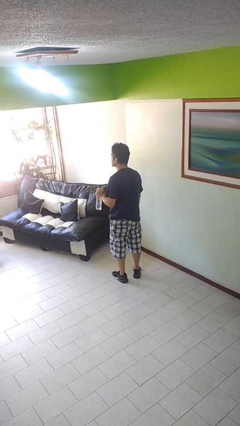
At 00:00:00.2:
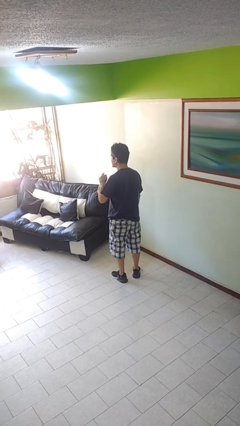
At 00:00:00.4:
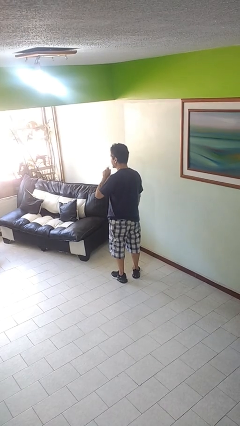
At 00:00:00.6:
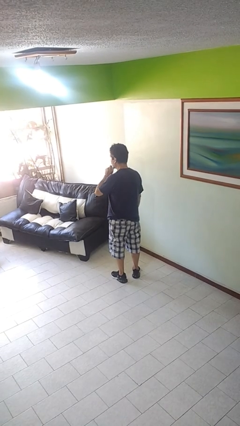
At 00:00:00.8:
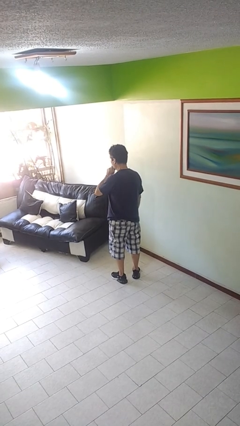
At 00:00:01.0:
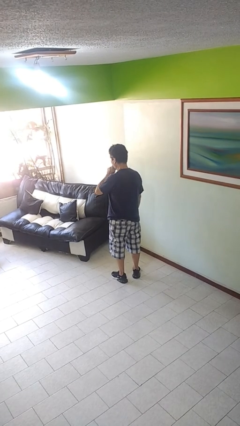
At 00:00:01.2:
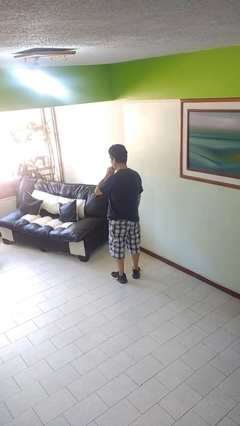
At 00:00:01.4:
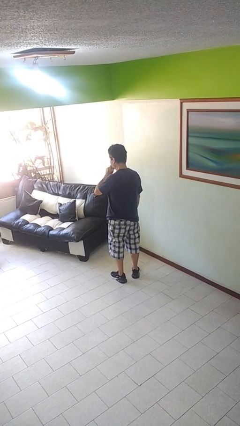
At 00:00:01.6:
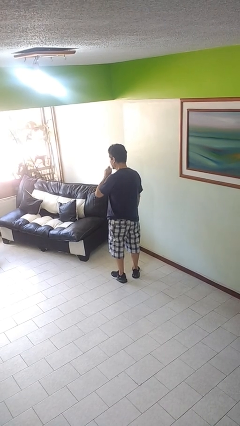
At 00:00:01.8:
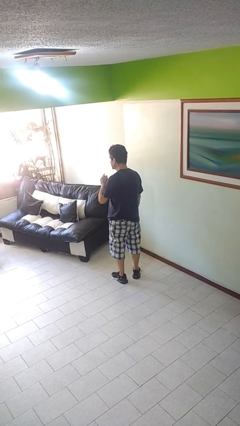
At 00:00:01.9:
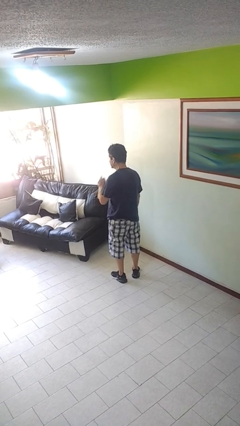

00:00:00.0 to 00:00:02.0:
person drinks from straw

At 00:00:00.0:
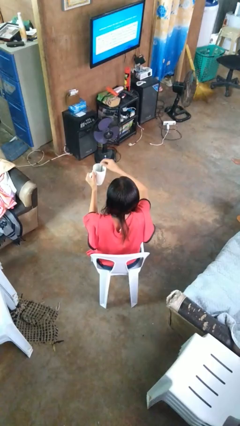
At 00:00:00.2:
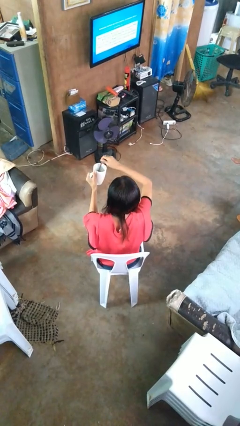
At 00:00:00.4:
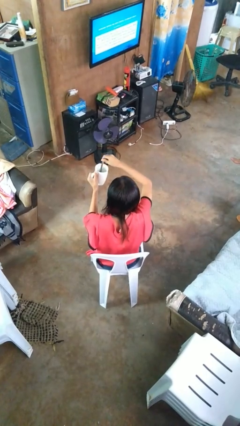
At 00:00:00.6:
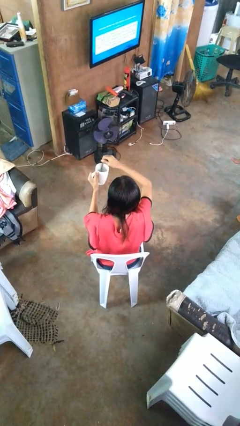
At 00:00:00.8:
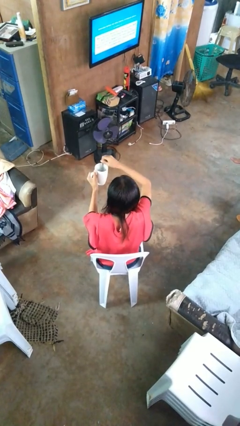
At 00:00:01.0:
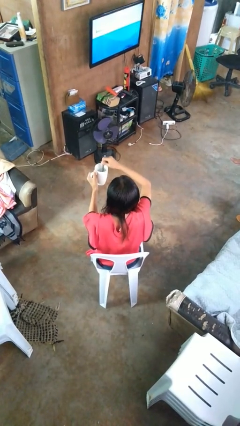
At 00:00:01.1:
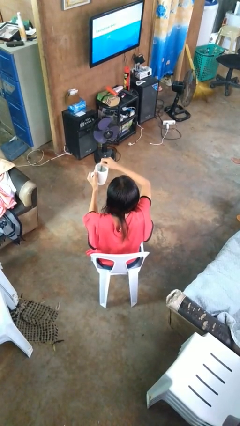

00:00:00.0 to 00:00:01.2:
person stirs mug

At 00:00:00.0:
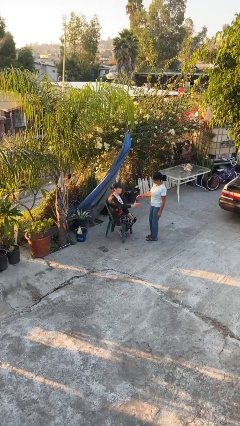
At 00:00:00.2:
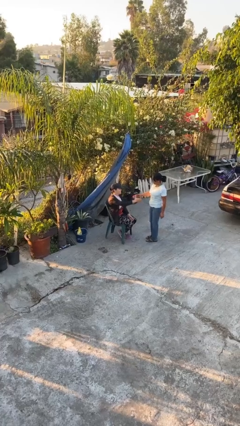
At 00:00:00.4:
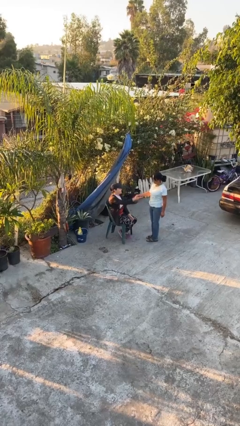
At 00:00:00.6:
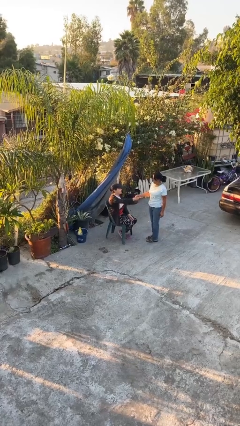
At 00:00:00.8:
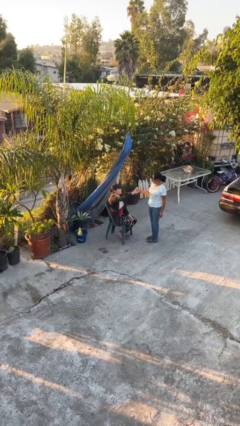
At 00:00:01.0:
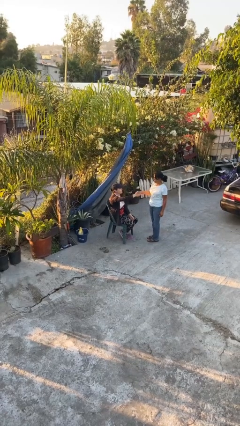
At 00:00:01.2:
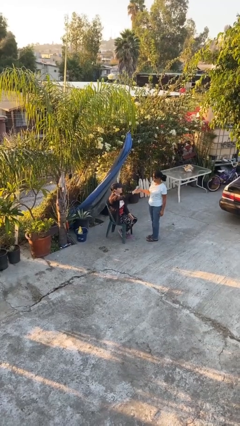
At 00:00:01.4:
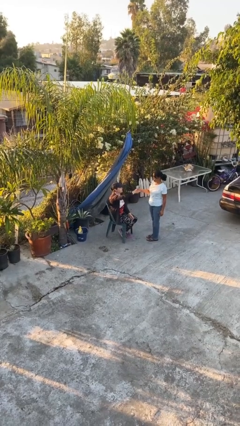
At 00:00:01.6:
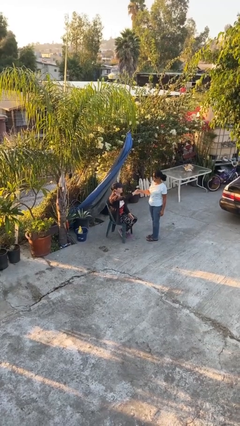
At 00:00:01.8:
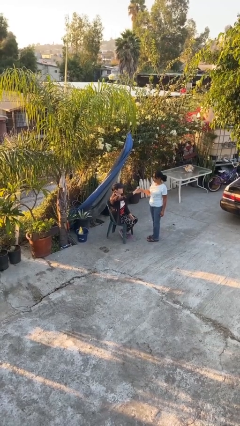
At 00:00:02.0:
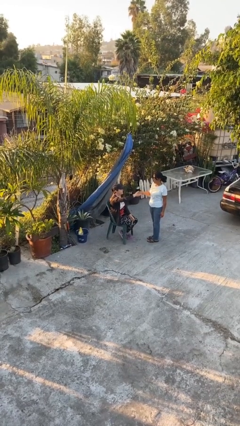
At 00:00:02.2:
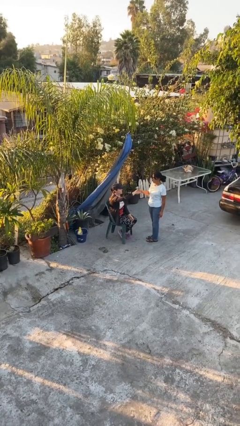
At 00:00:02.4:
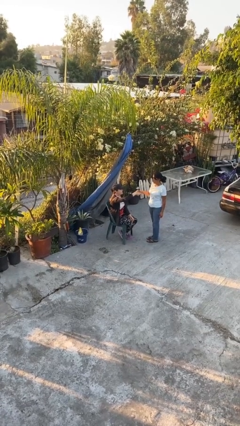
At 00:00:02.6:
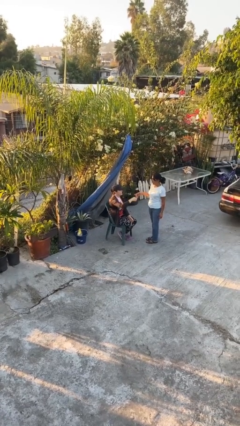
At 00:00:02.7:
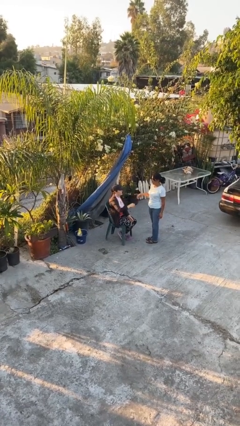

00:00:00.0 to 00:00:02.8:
person shakes hand

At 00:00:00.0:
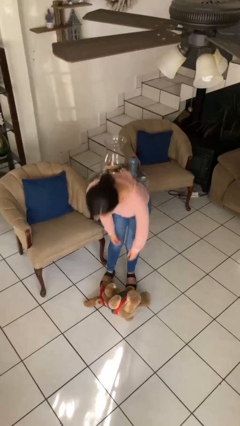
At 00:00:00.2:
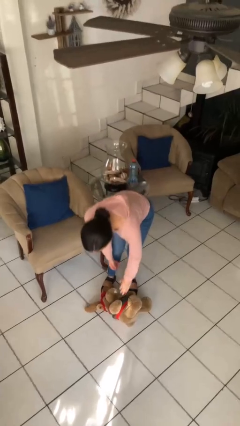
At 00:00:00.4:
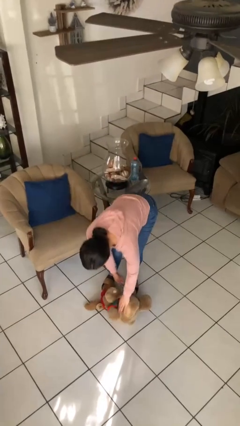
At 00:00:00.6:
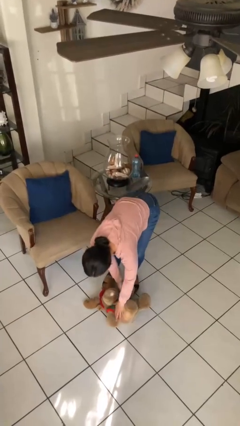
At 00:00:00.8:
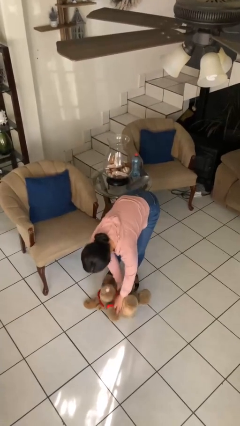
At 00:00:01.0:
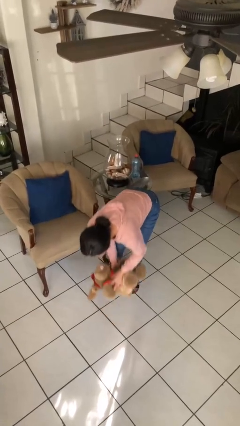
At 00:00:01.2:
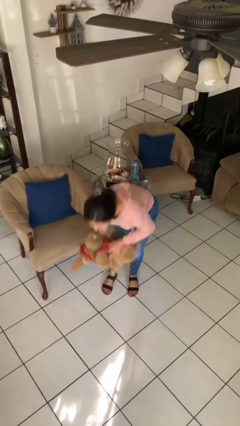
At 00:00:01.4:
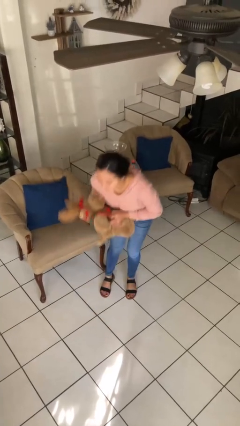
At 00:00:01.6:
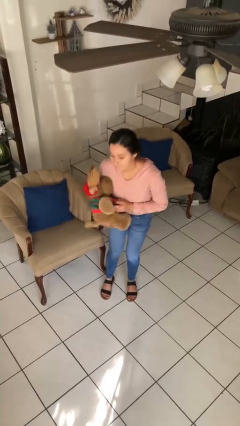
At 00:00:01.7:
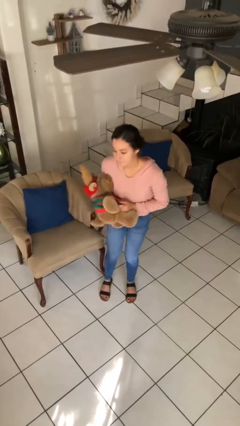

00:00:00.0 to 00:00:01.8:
person picks up object from floor

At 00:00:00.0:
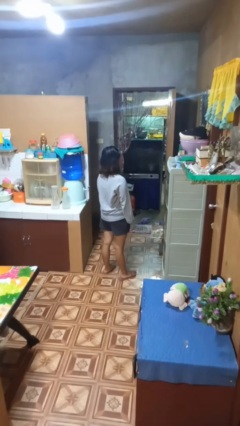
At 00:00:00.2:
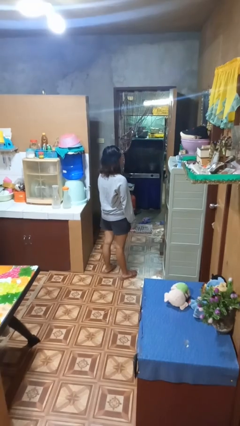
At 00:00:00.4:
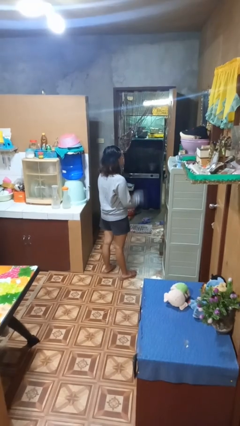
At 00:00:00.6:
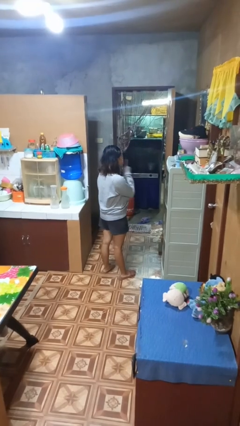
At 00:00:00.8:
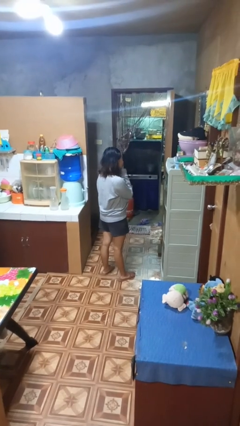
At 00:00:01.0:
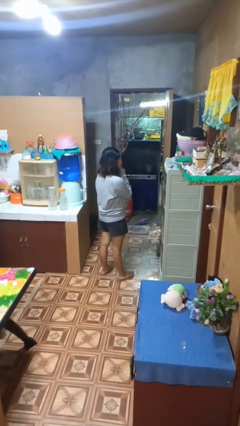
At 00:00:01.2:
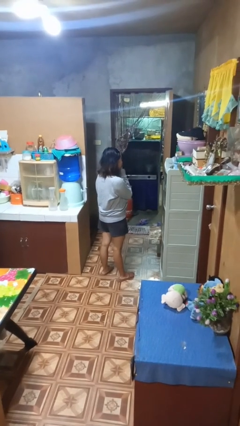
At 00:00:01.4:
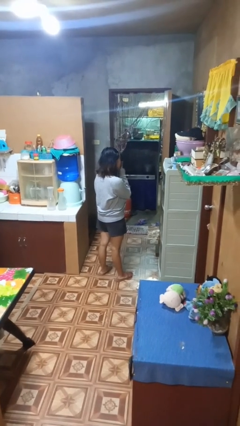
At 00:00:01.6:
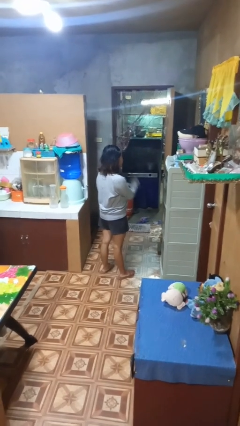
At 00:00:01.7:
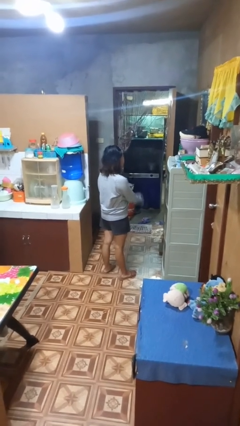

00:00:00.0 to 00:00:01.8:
person gestures be quiet

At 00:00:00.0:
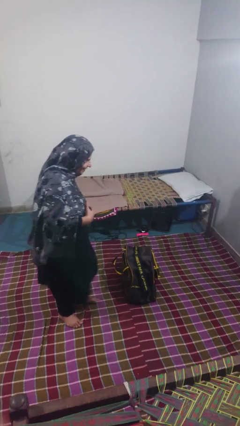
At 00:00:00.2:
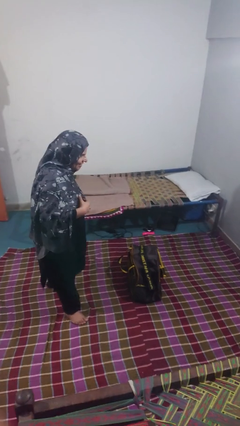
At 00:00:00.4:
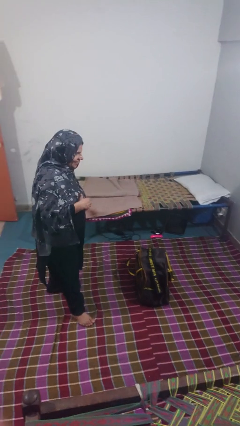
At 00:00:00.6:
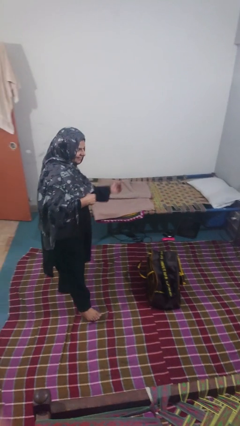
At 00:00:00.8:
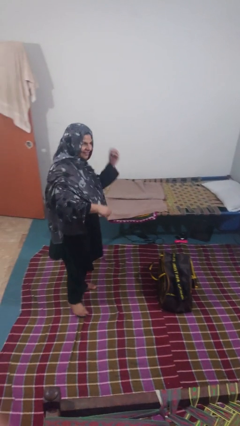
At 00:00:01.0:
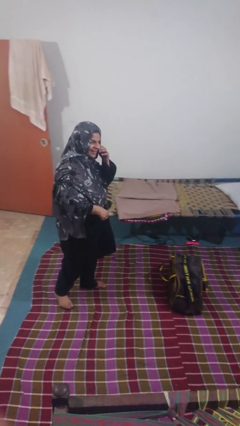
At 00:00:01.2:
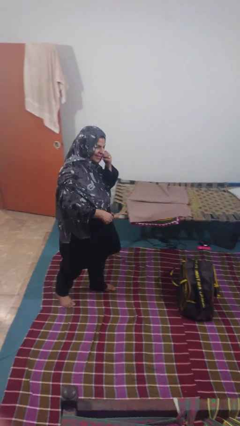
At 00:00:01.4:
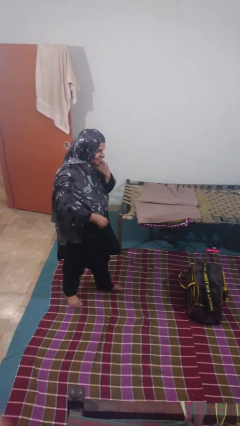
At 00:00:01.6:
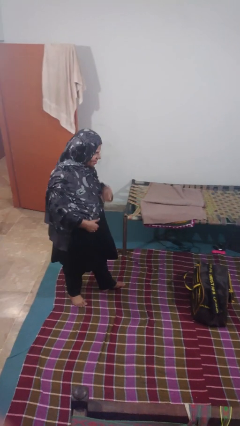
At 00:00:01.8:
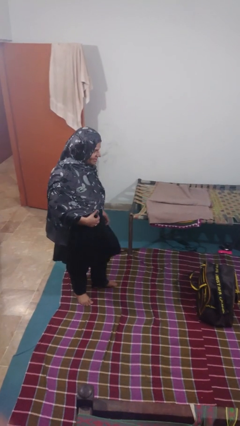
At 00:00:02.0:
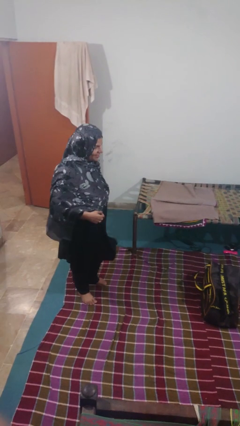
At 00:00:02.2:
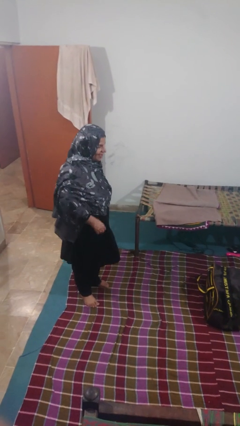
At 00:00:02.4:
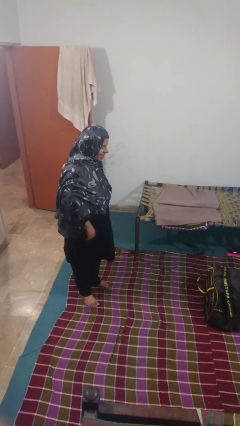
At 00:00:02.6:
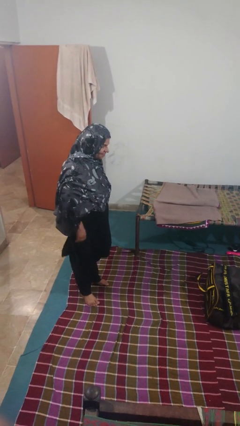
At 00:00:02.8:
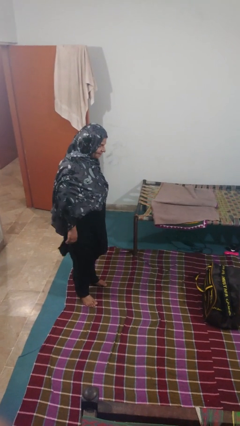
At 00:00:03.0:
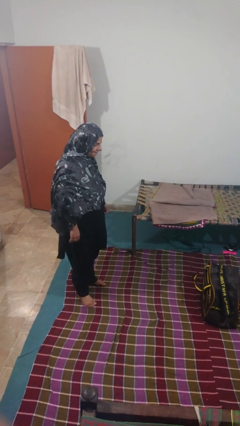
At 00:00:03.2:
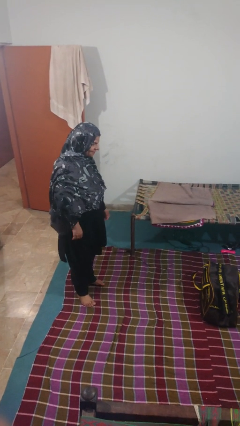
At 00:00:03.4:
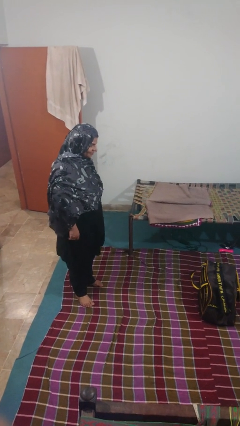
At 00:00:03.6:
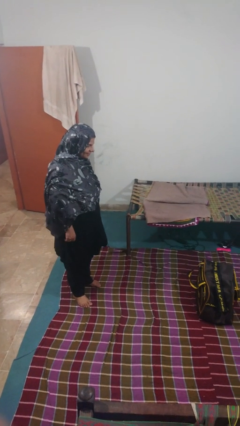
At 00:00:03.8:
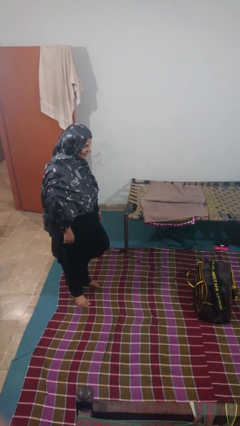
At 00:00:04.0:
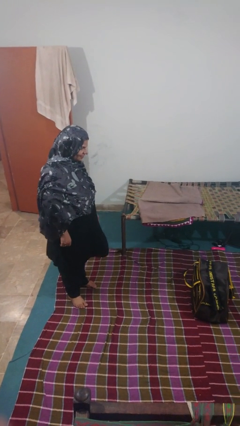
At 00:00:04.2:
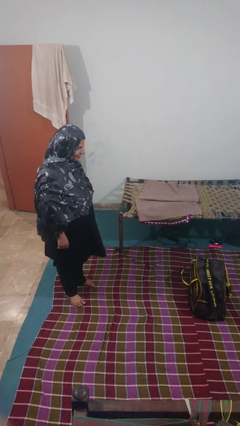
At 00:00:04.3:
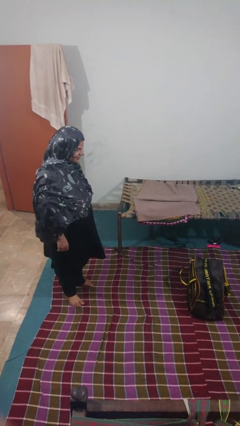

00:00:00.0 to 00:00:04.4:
person stands up from floor

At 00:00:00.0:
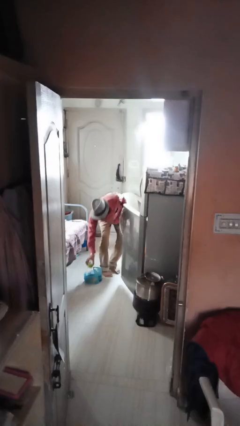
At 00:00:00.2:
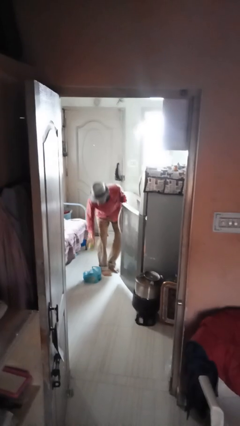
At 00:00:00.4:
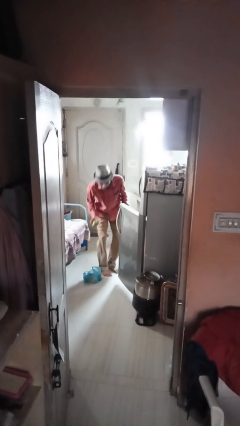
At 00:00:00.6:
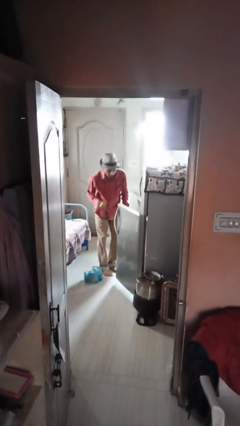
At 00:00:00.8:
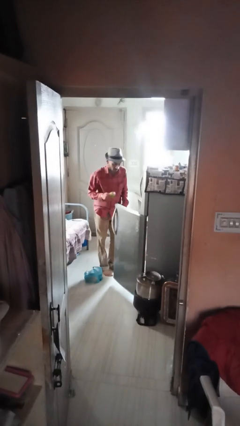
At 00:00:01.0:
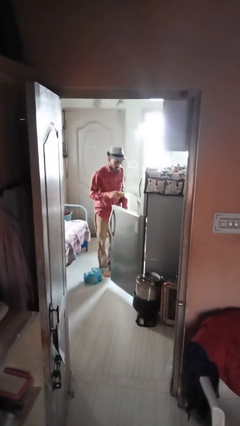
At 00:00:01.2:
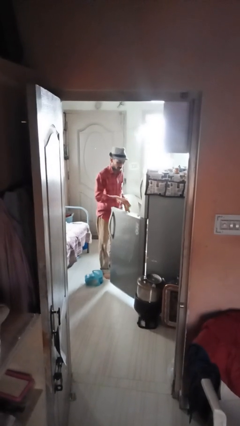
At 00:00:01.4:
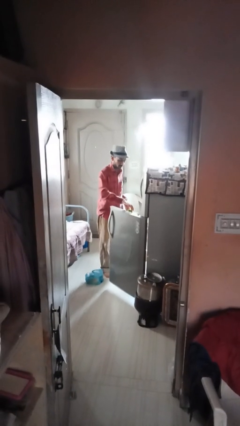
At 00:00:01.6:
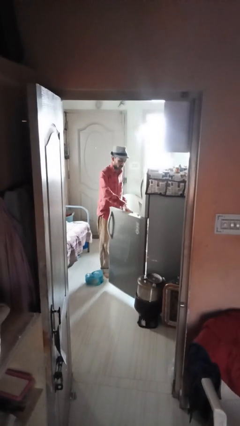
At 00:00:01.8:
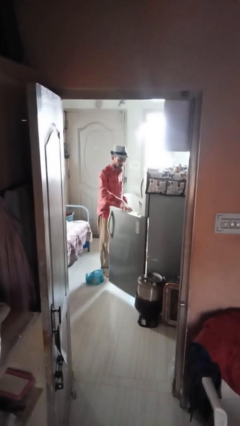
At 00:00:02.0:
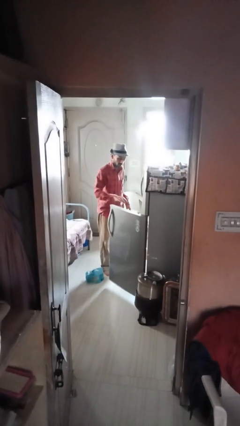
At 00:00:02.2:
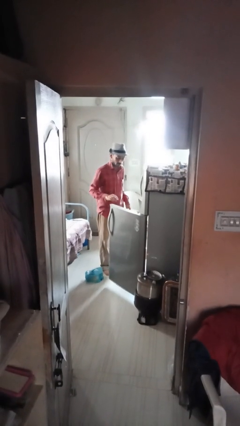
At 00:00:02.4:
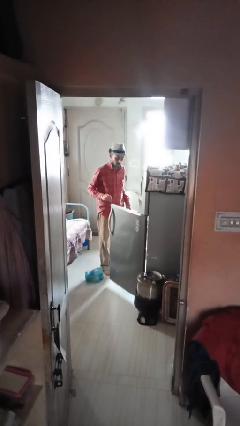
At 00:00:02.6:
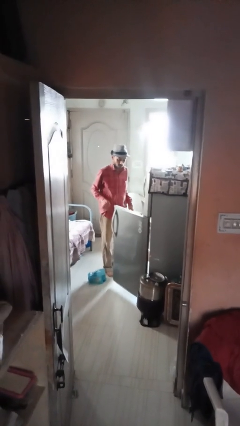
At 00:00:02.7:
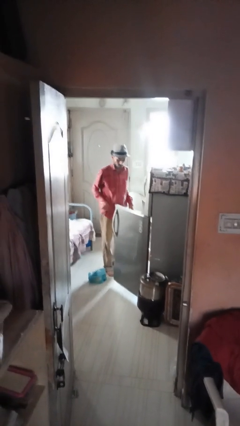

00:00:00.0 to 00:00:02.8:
person loads groceries into refrigerator
